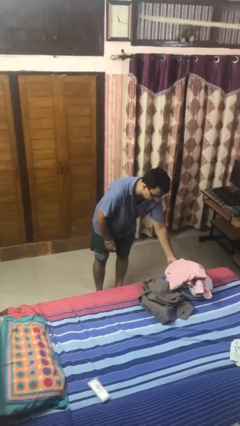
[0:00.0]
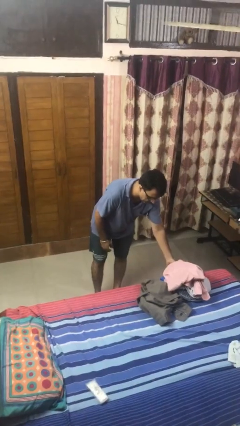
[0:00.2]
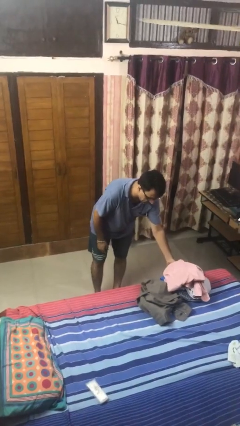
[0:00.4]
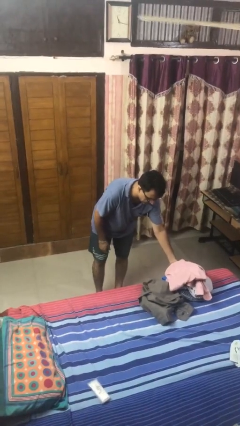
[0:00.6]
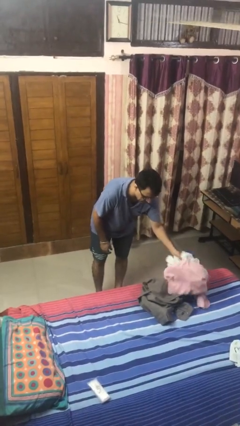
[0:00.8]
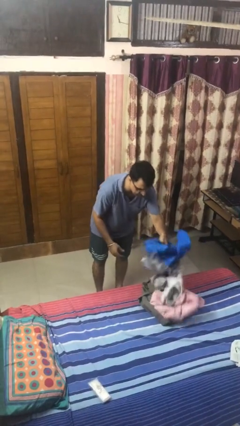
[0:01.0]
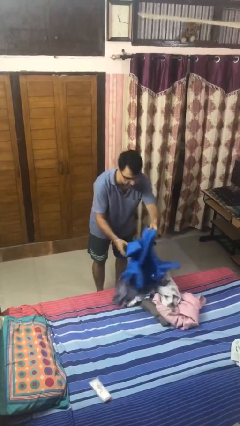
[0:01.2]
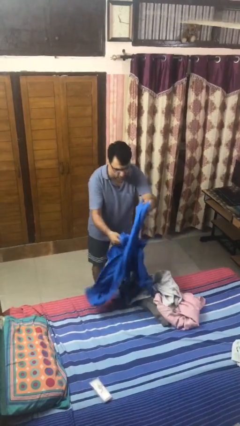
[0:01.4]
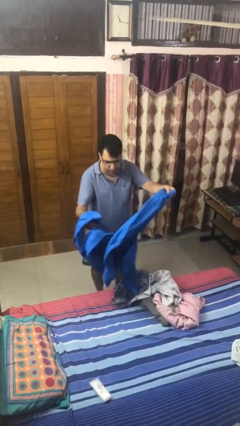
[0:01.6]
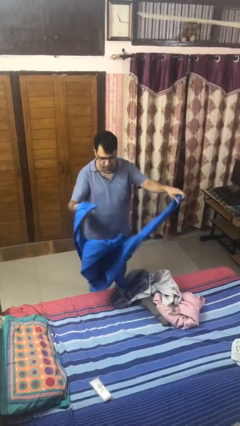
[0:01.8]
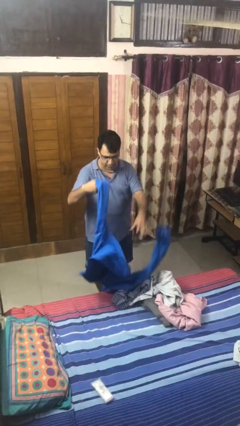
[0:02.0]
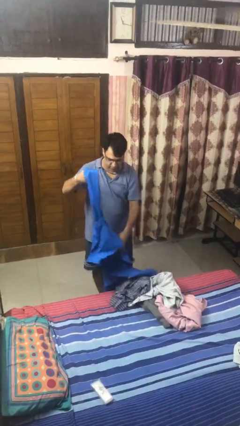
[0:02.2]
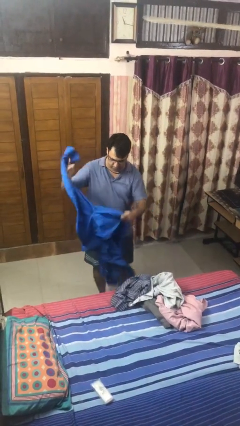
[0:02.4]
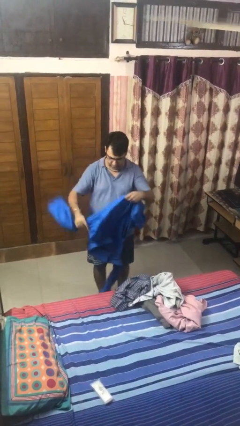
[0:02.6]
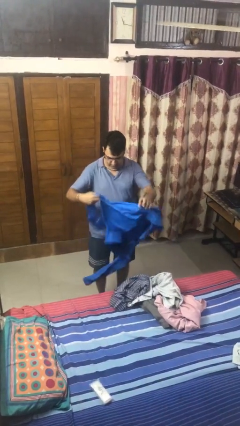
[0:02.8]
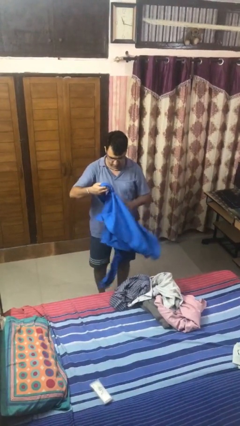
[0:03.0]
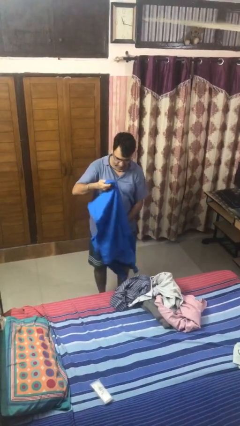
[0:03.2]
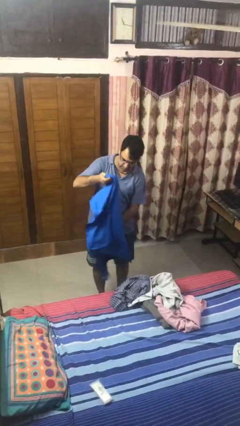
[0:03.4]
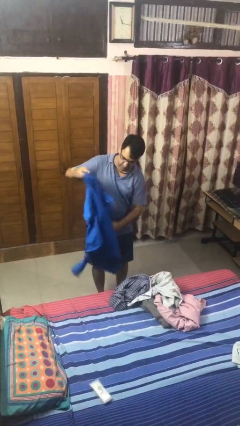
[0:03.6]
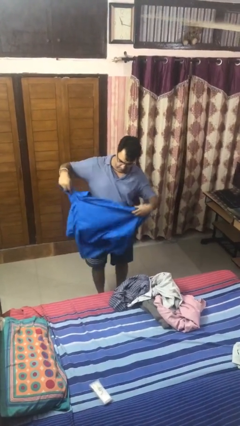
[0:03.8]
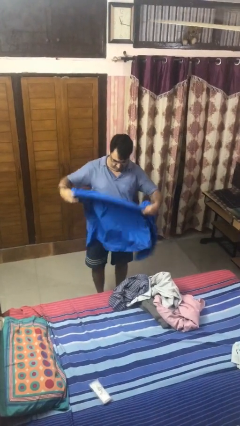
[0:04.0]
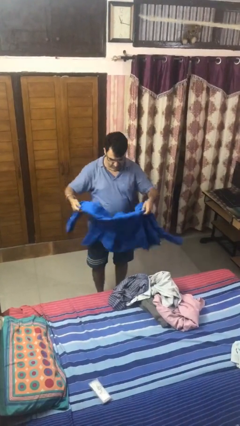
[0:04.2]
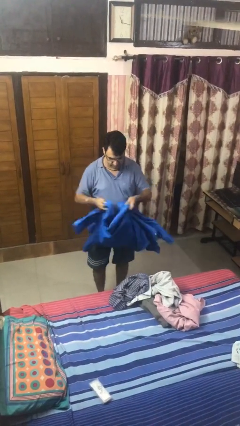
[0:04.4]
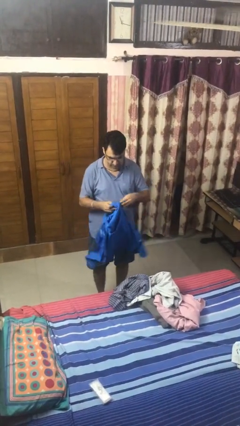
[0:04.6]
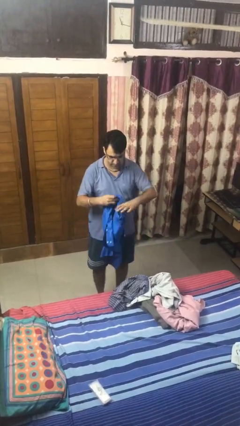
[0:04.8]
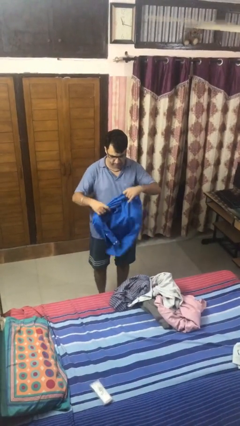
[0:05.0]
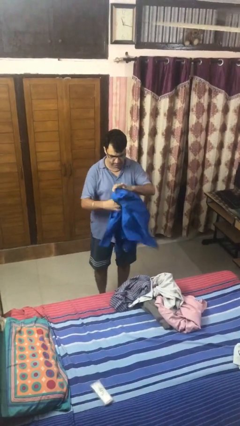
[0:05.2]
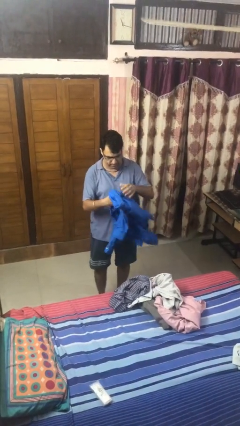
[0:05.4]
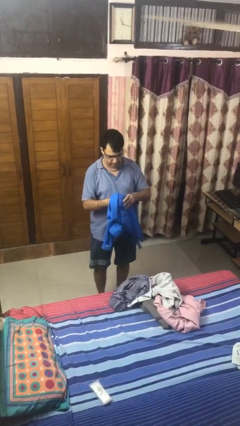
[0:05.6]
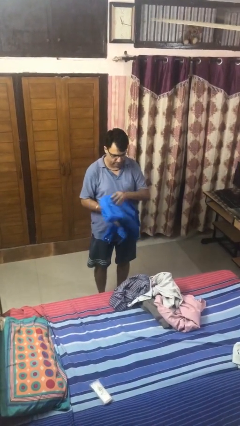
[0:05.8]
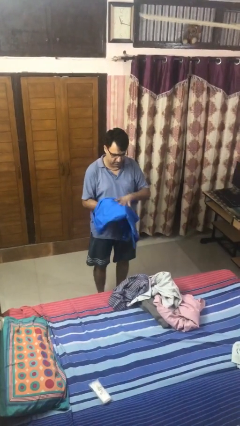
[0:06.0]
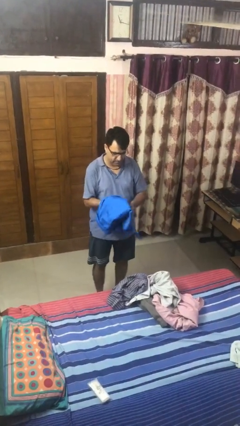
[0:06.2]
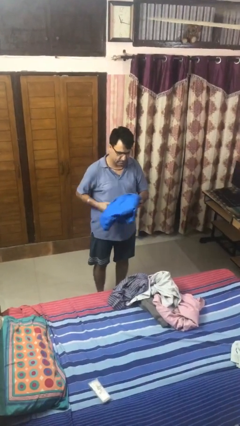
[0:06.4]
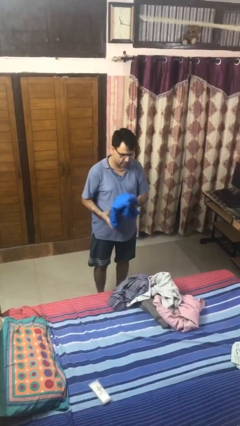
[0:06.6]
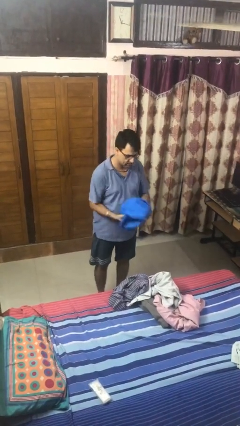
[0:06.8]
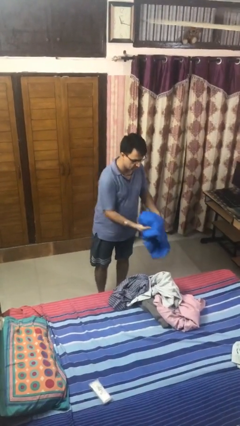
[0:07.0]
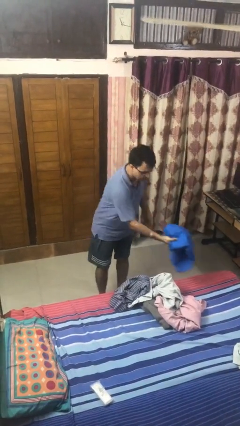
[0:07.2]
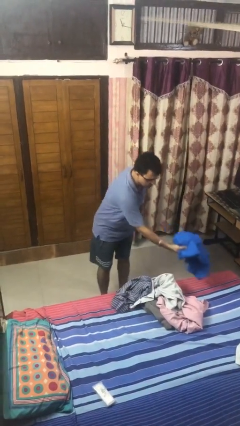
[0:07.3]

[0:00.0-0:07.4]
person folds shirt

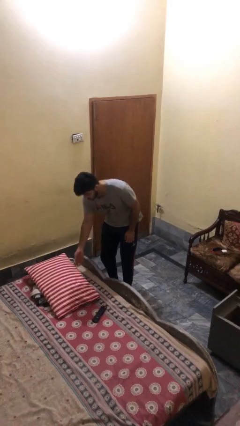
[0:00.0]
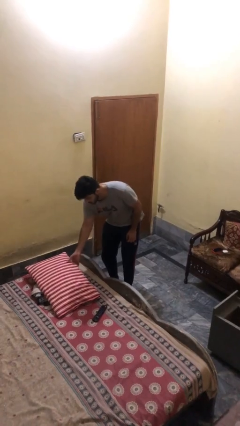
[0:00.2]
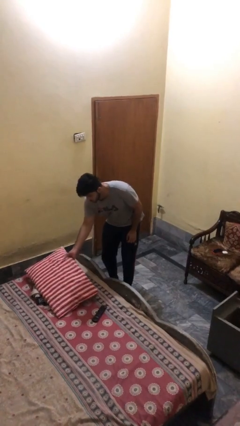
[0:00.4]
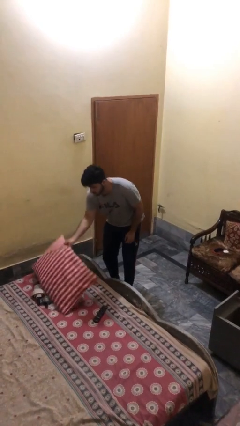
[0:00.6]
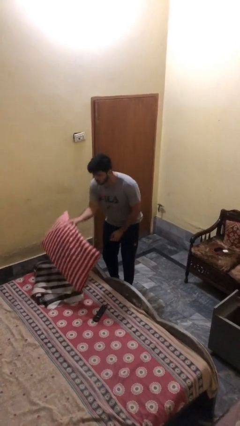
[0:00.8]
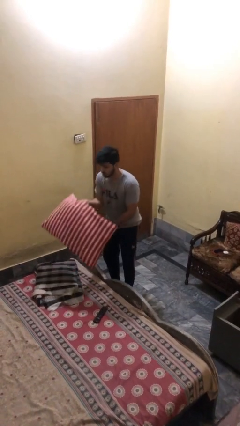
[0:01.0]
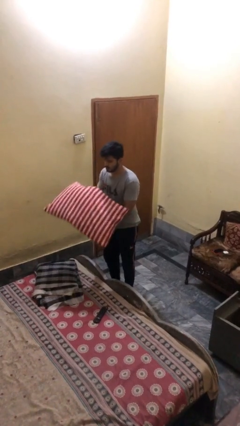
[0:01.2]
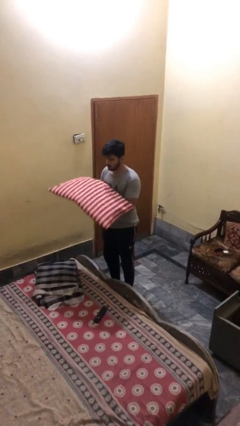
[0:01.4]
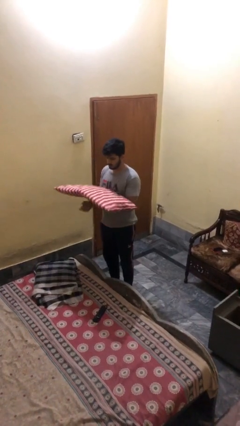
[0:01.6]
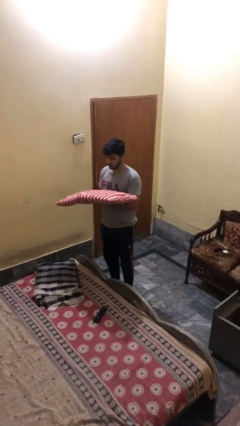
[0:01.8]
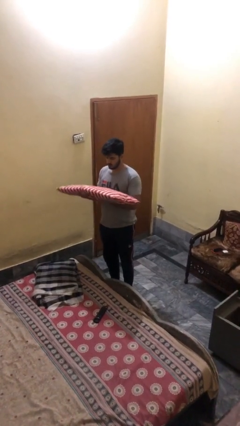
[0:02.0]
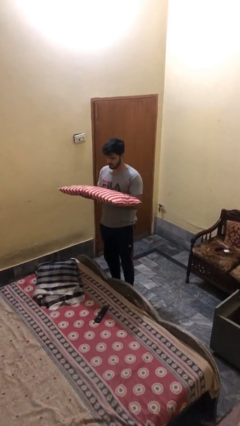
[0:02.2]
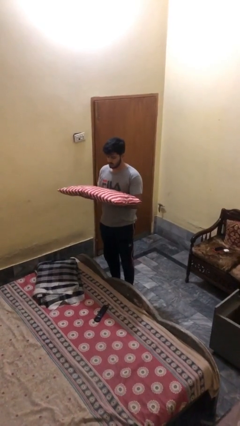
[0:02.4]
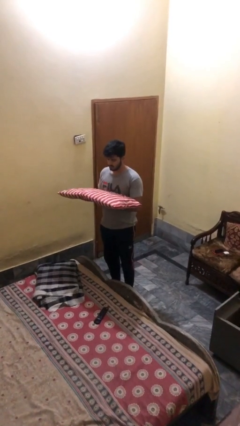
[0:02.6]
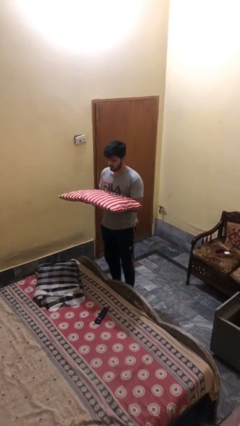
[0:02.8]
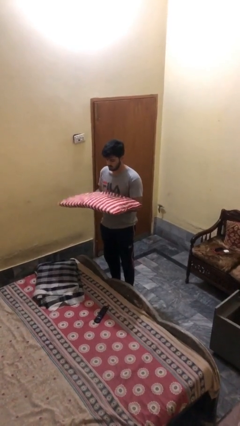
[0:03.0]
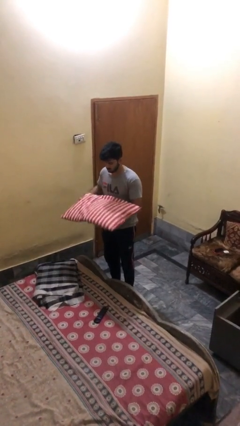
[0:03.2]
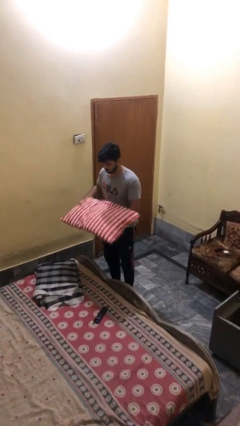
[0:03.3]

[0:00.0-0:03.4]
person picks up object from bed

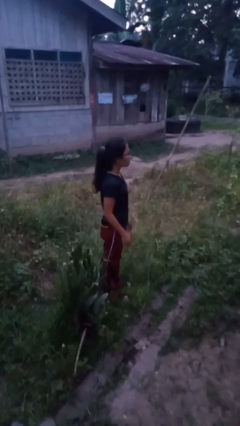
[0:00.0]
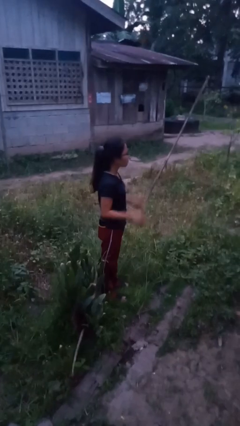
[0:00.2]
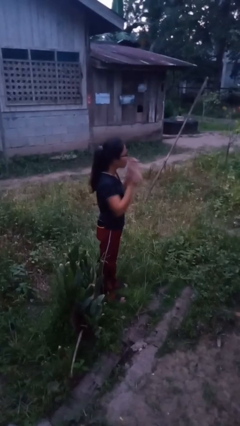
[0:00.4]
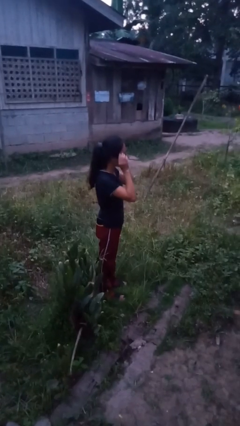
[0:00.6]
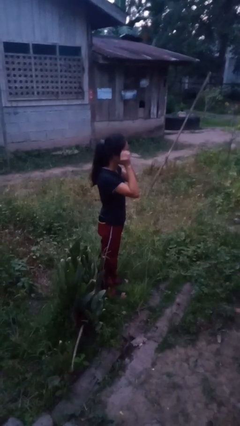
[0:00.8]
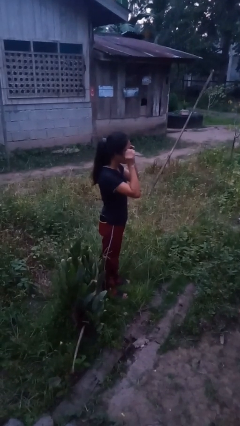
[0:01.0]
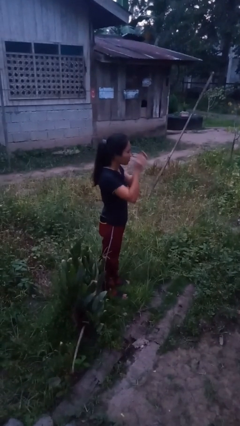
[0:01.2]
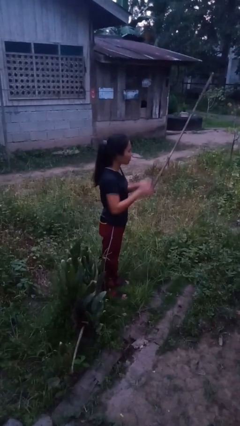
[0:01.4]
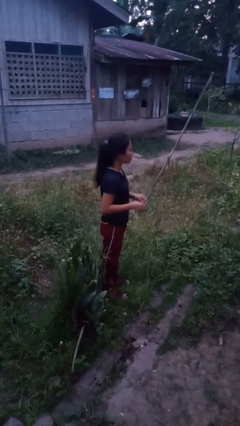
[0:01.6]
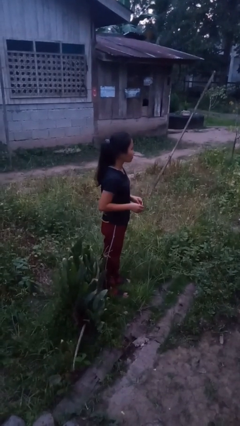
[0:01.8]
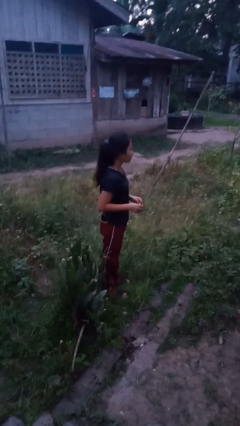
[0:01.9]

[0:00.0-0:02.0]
person takes off glasses

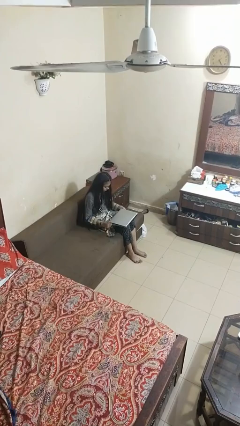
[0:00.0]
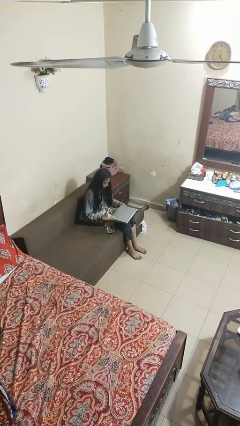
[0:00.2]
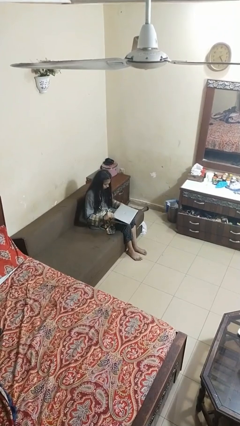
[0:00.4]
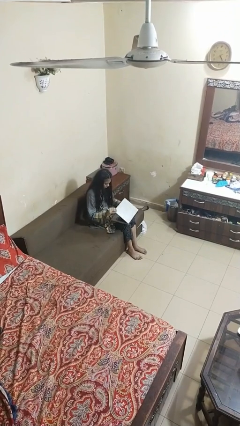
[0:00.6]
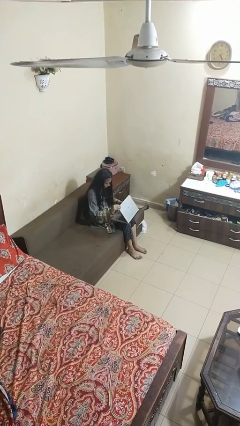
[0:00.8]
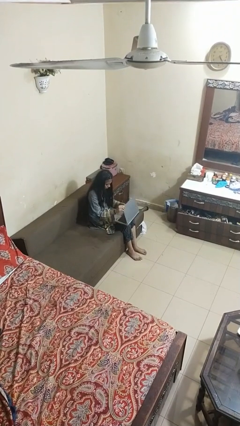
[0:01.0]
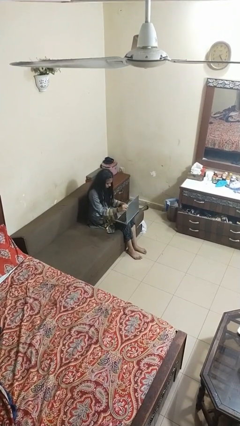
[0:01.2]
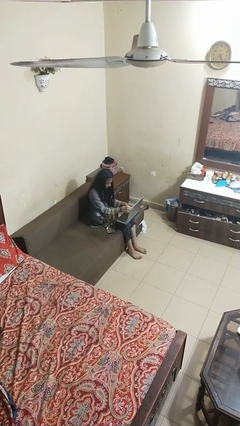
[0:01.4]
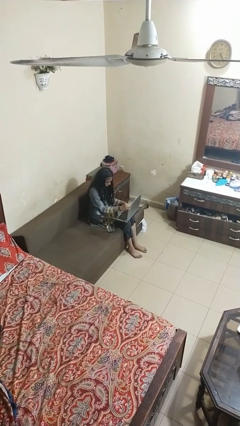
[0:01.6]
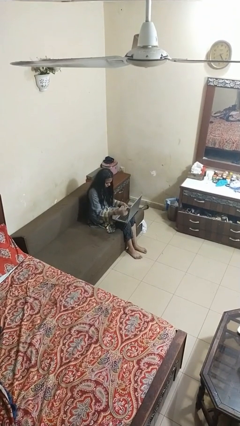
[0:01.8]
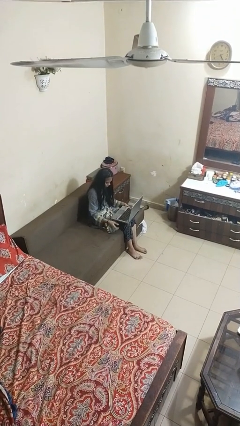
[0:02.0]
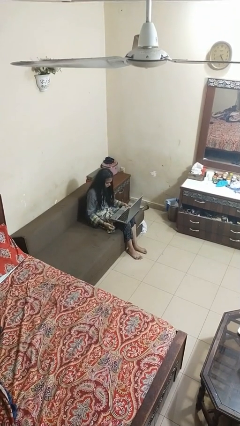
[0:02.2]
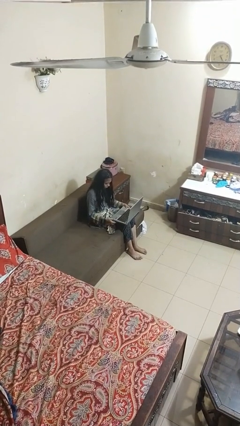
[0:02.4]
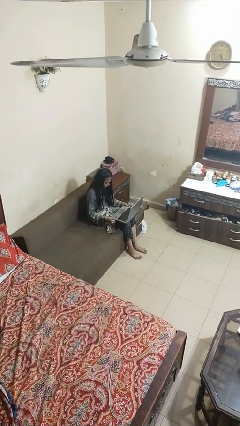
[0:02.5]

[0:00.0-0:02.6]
person opens laptop

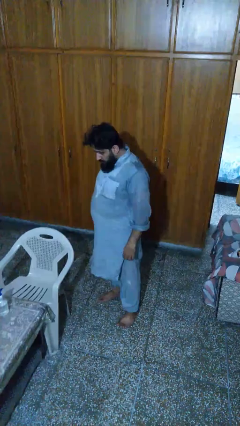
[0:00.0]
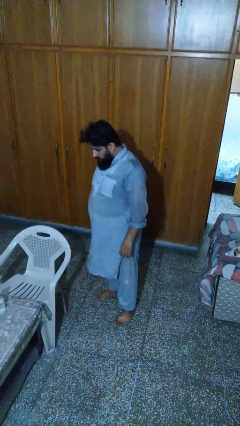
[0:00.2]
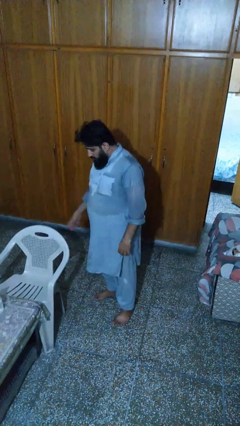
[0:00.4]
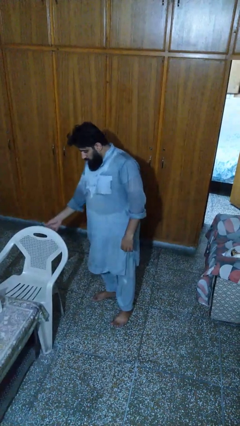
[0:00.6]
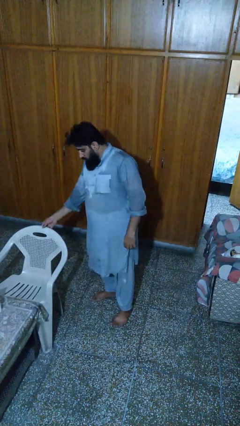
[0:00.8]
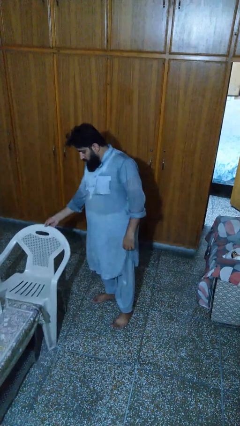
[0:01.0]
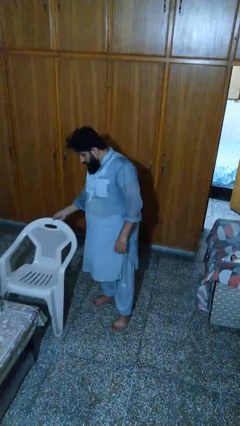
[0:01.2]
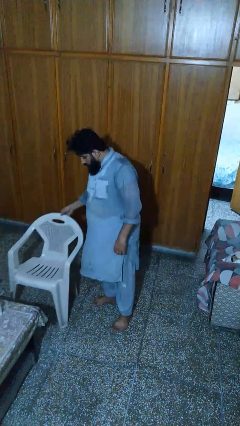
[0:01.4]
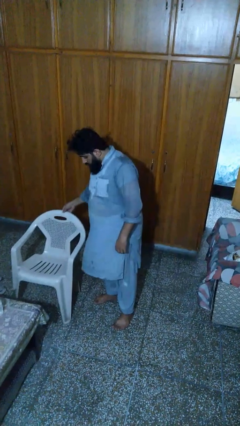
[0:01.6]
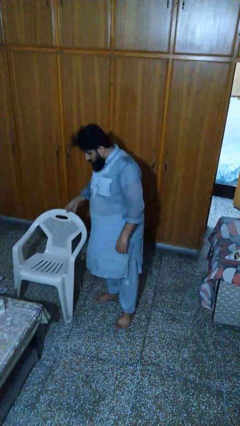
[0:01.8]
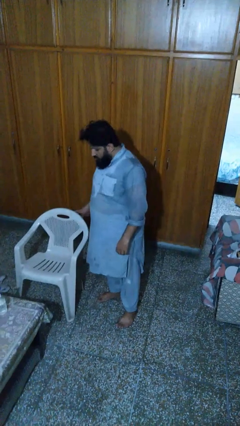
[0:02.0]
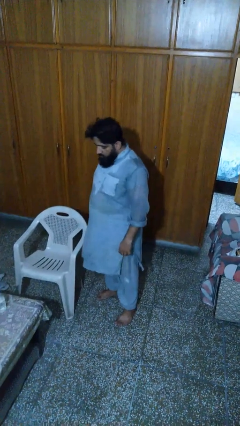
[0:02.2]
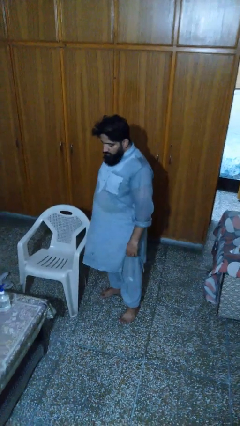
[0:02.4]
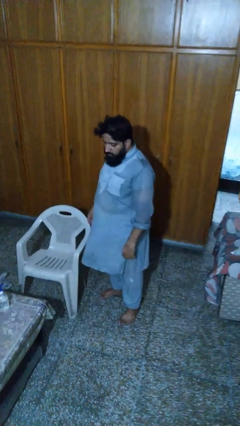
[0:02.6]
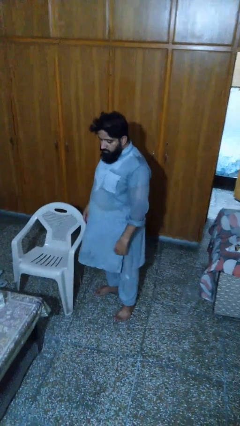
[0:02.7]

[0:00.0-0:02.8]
person pulls out chair
